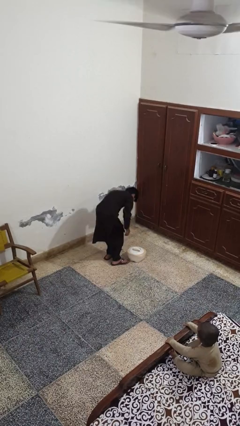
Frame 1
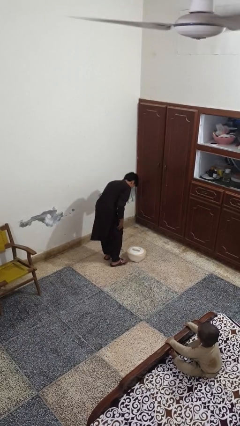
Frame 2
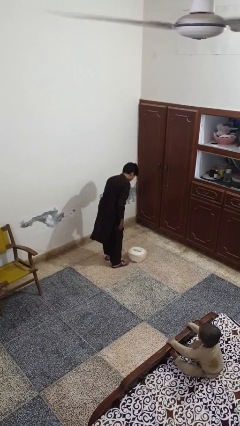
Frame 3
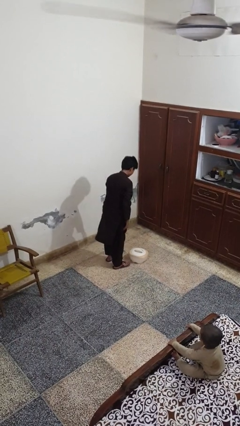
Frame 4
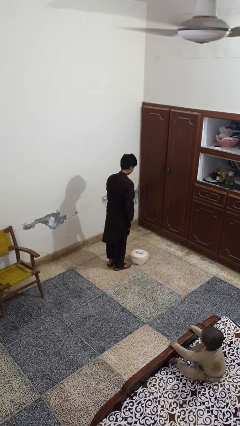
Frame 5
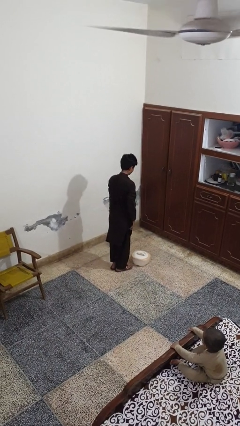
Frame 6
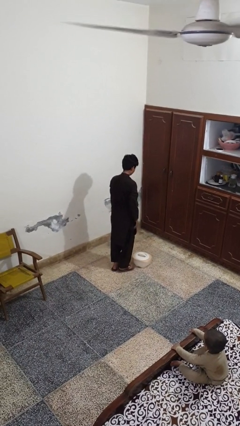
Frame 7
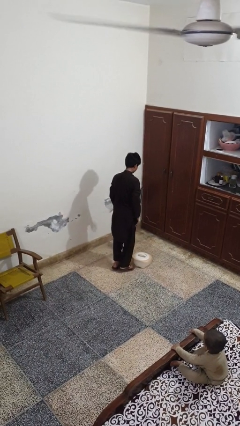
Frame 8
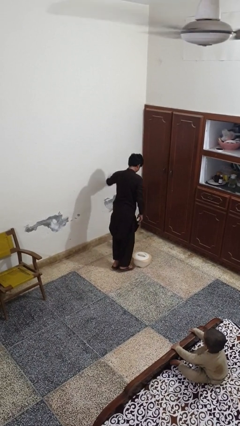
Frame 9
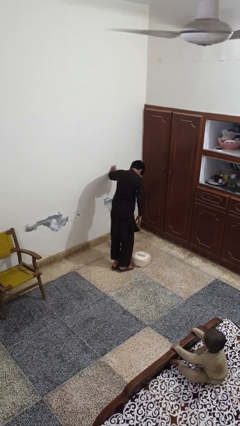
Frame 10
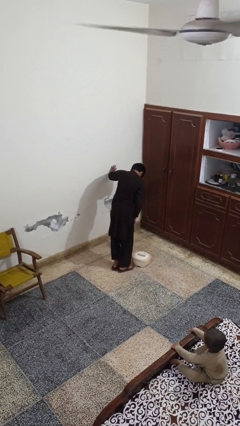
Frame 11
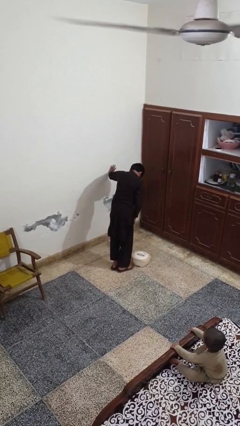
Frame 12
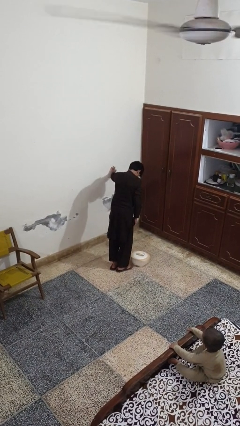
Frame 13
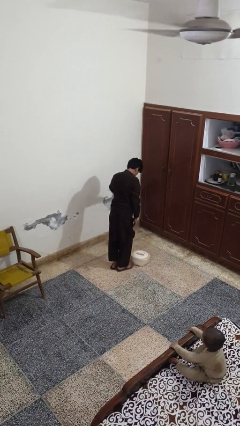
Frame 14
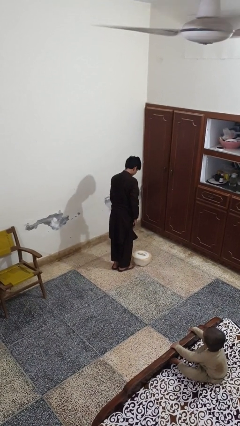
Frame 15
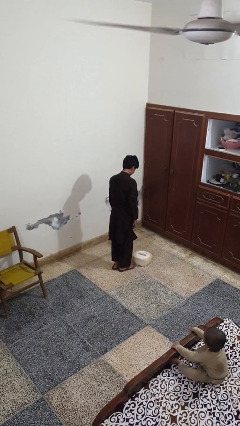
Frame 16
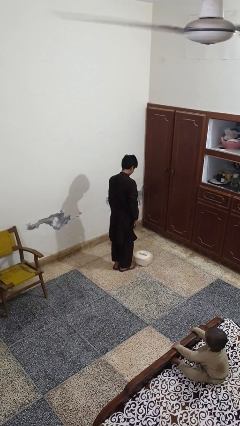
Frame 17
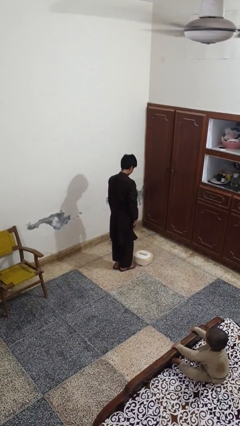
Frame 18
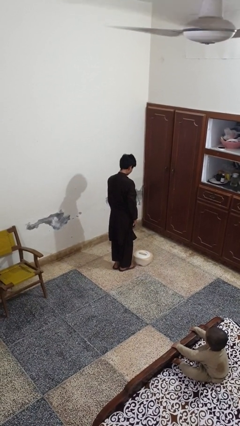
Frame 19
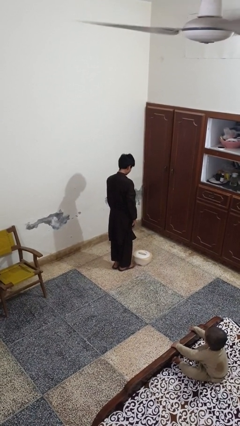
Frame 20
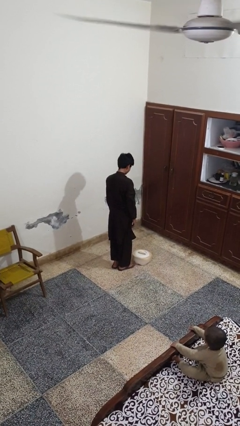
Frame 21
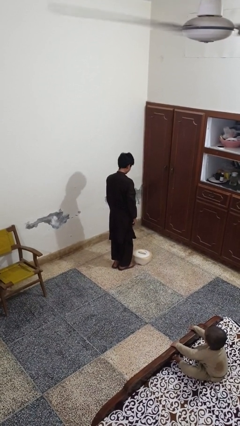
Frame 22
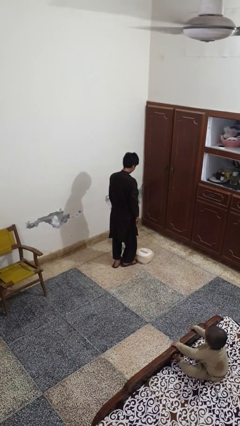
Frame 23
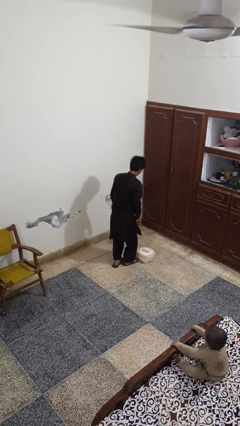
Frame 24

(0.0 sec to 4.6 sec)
person stands up from floor

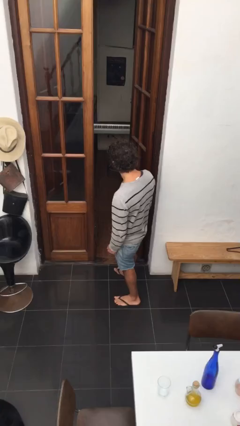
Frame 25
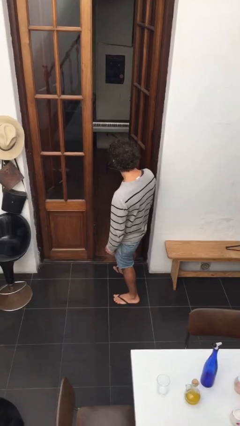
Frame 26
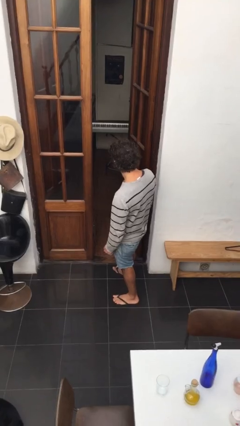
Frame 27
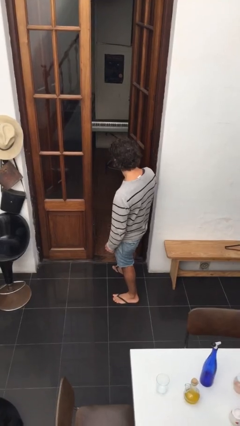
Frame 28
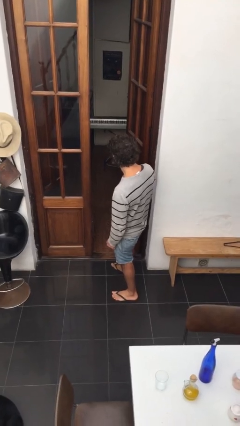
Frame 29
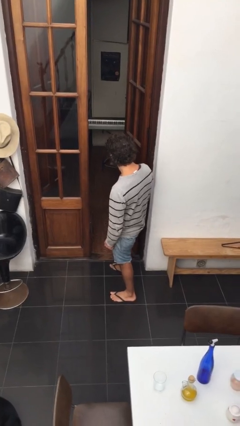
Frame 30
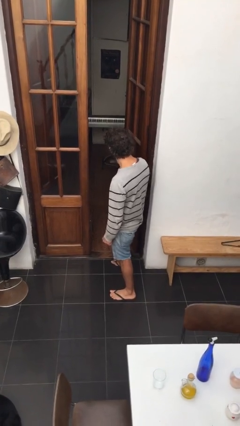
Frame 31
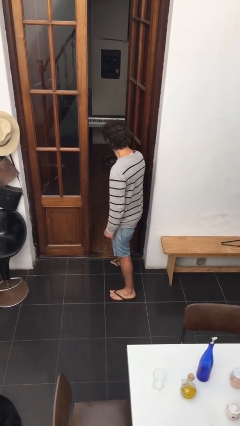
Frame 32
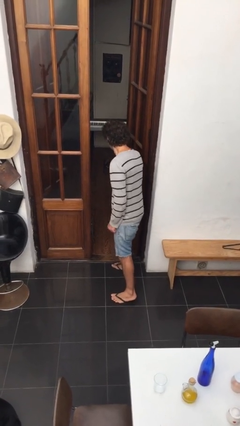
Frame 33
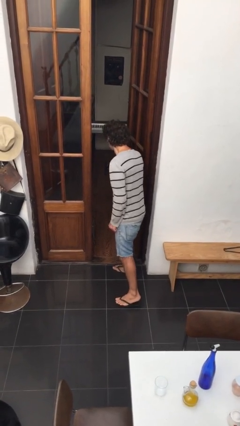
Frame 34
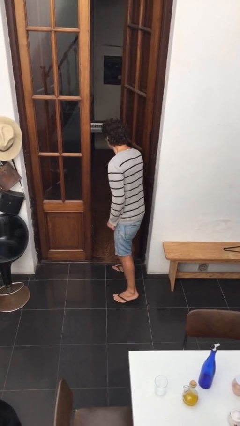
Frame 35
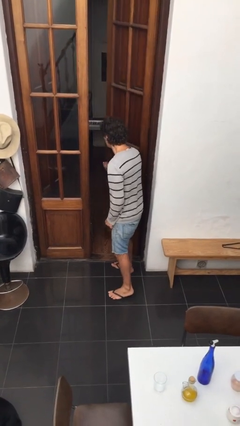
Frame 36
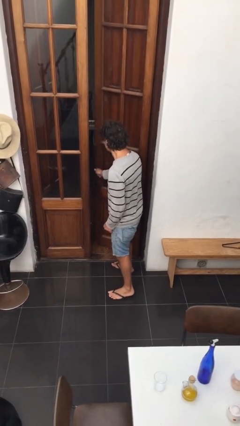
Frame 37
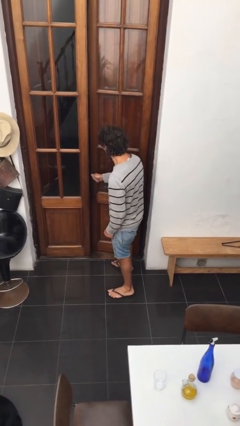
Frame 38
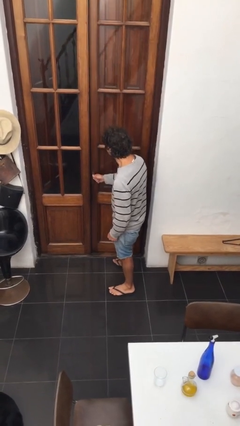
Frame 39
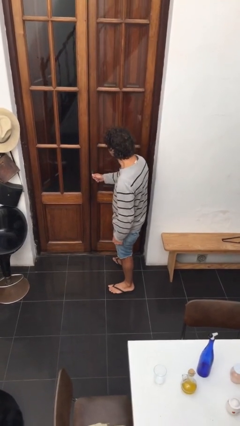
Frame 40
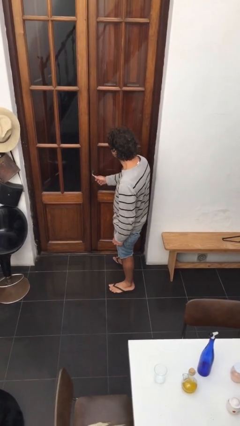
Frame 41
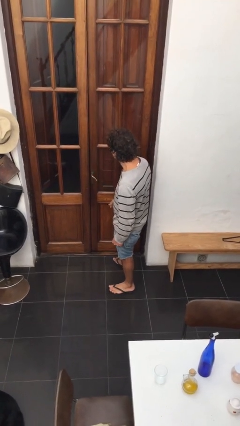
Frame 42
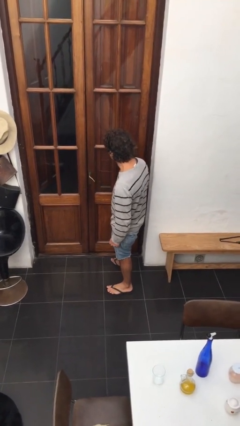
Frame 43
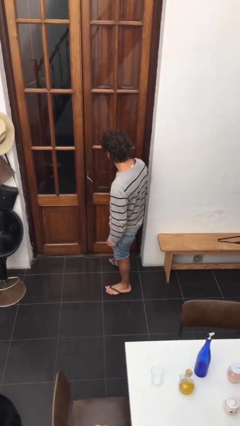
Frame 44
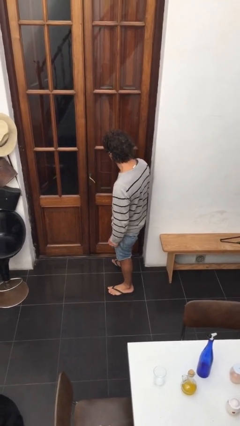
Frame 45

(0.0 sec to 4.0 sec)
person closes facility door

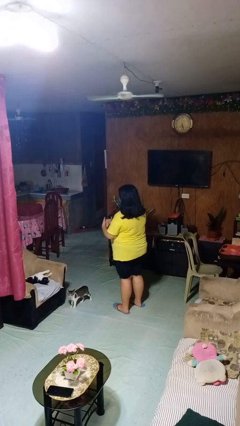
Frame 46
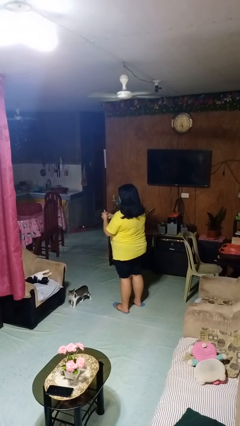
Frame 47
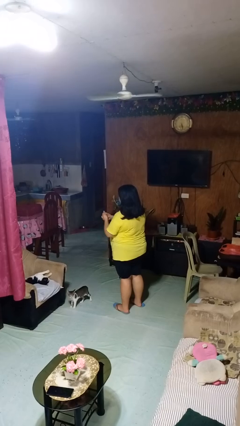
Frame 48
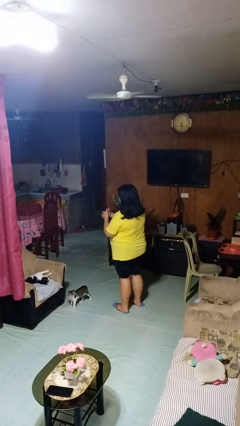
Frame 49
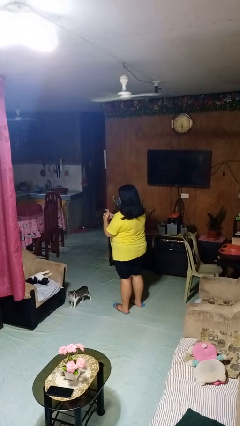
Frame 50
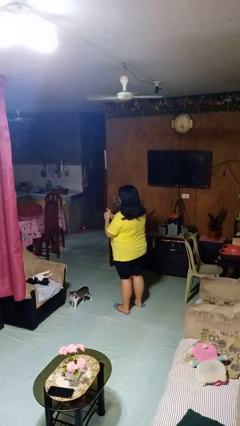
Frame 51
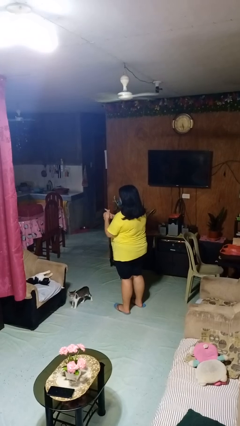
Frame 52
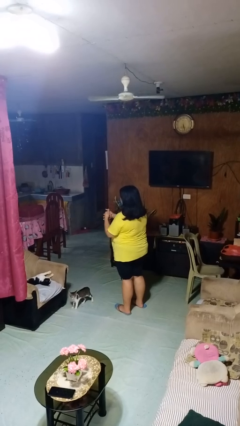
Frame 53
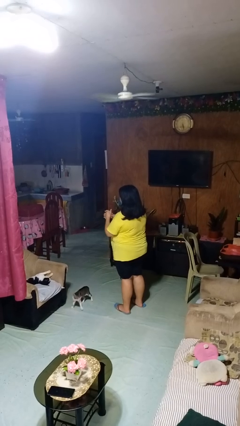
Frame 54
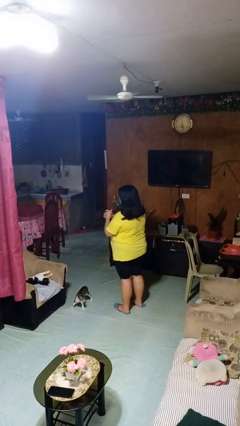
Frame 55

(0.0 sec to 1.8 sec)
person cracks knuckles

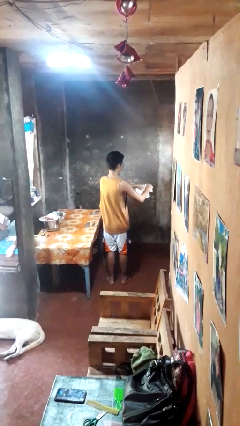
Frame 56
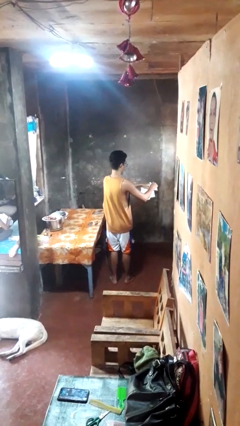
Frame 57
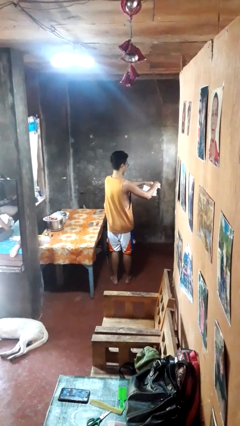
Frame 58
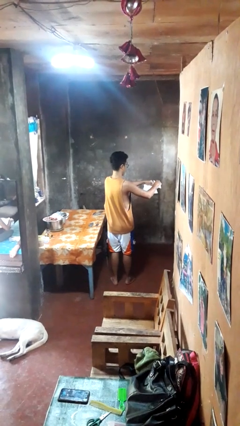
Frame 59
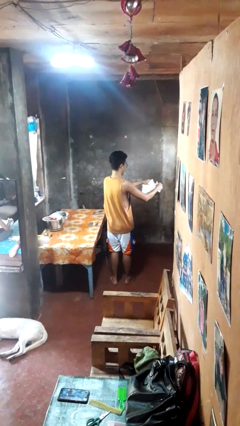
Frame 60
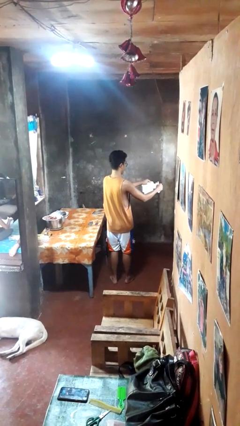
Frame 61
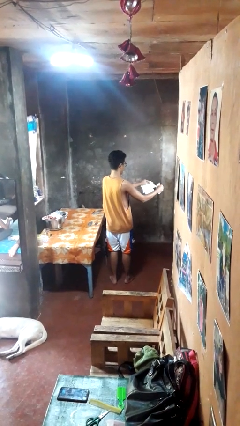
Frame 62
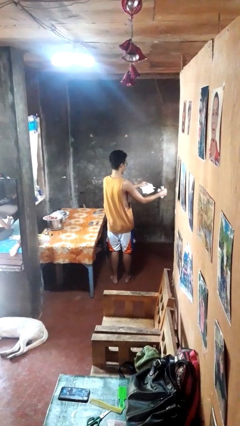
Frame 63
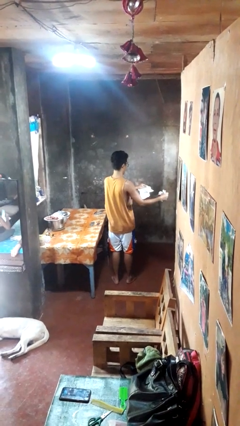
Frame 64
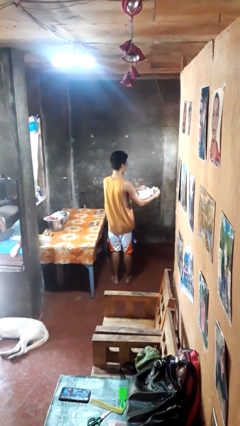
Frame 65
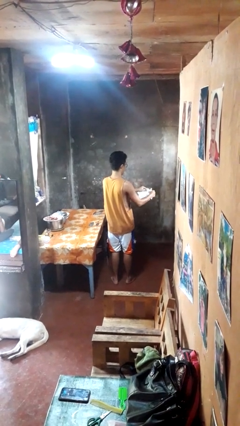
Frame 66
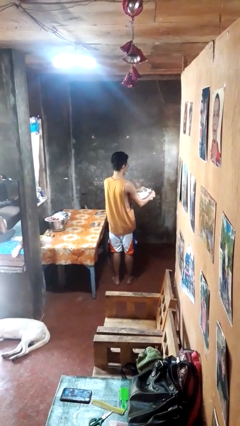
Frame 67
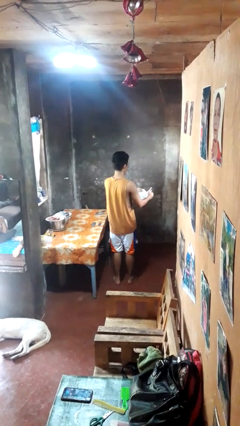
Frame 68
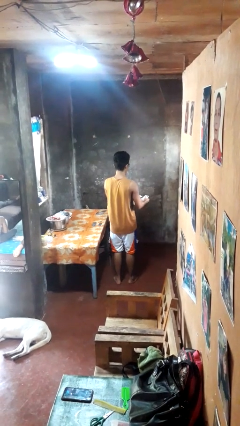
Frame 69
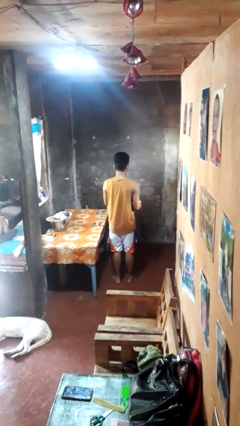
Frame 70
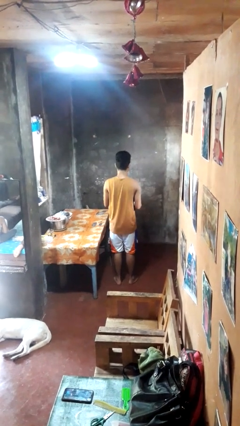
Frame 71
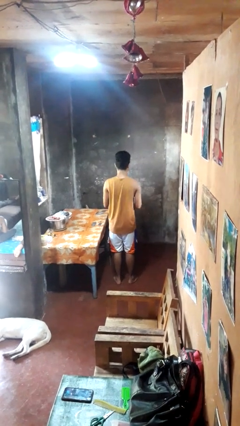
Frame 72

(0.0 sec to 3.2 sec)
person tears paper

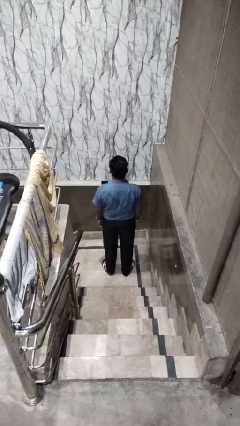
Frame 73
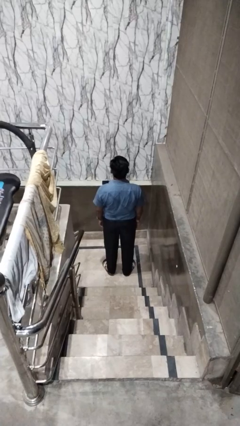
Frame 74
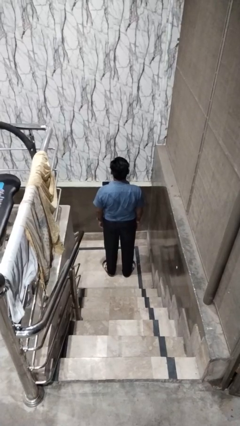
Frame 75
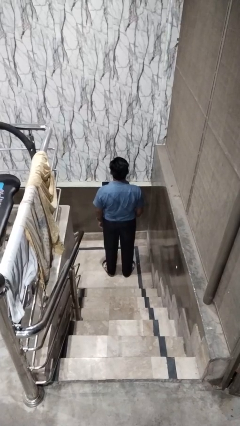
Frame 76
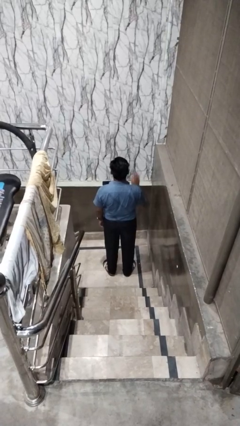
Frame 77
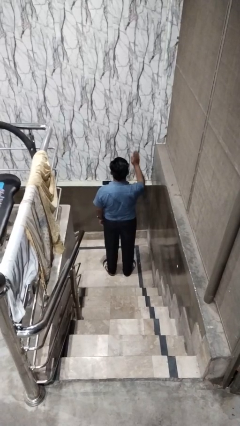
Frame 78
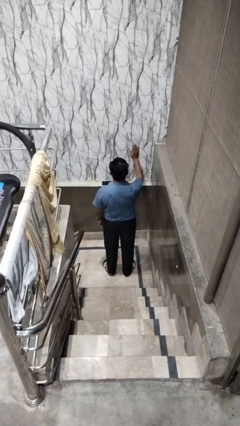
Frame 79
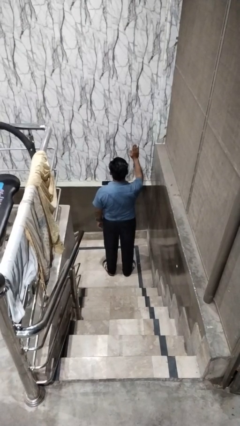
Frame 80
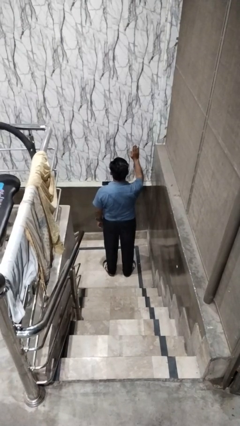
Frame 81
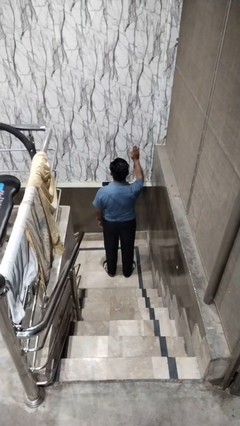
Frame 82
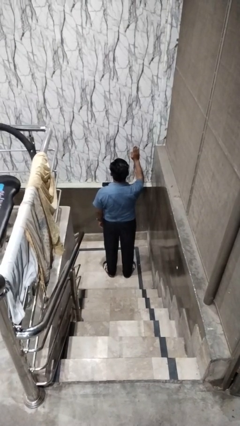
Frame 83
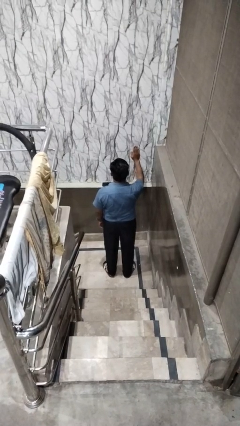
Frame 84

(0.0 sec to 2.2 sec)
person gestures stop

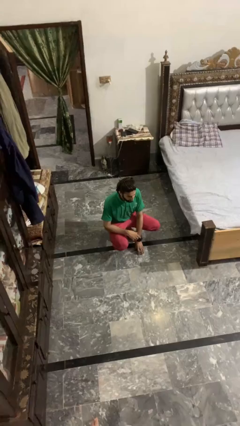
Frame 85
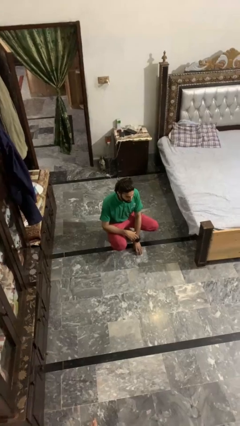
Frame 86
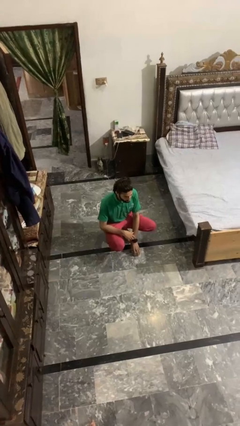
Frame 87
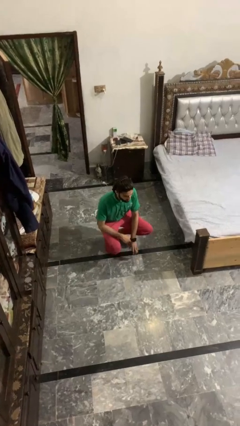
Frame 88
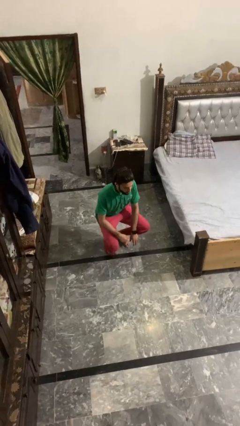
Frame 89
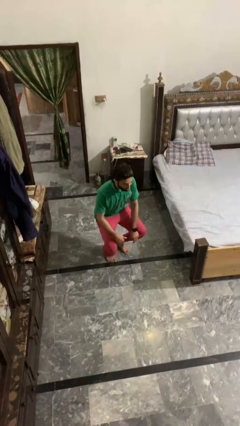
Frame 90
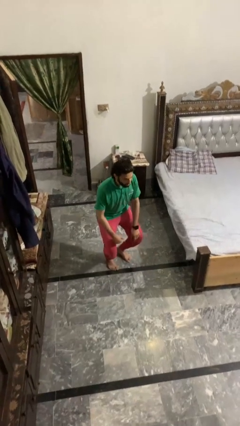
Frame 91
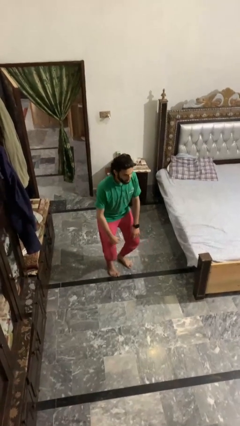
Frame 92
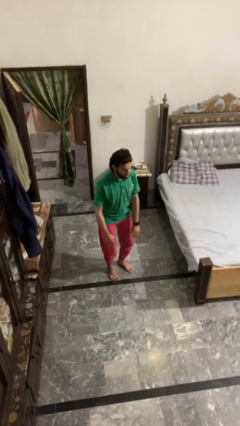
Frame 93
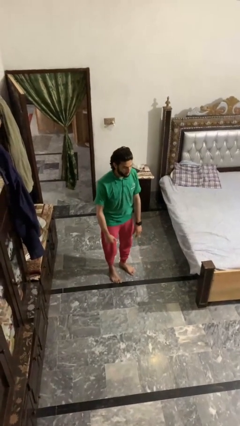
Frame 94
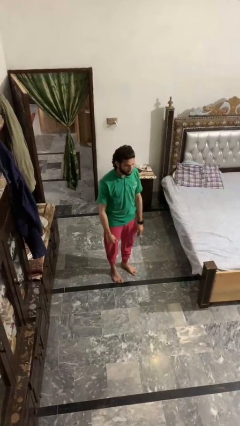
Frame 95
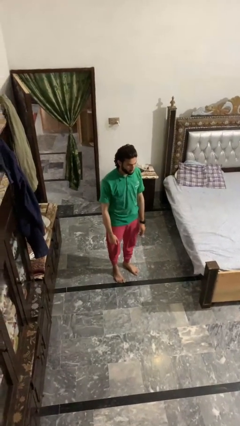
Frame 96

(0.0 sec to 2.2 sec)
person stands up
